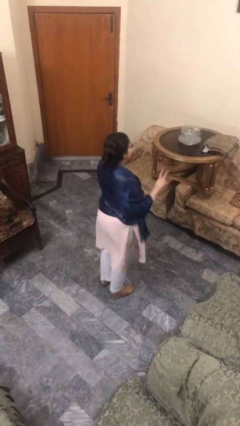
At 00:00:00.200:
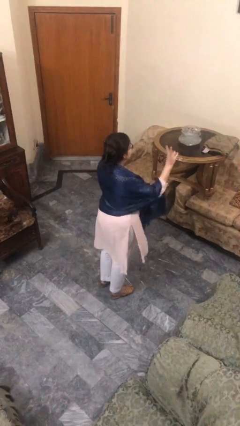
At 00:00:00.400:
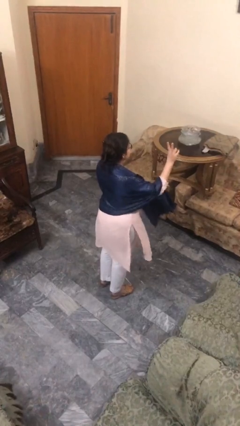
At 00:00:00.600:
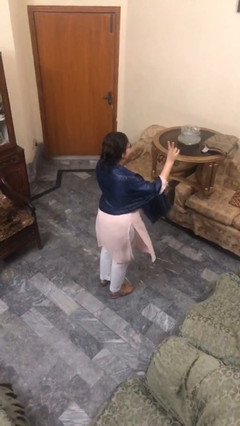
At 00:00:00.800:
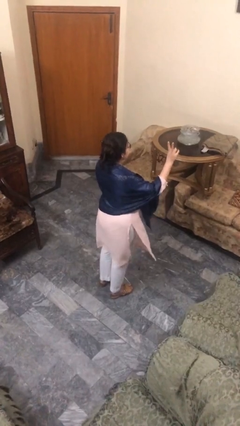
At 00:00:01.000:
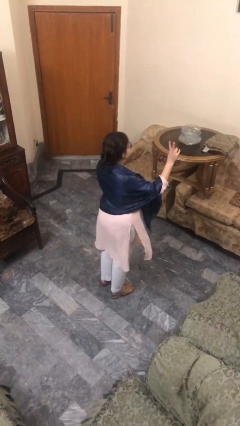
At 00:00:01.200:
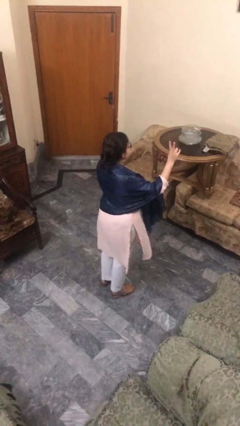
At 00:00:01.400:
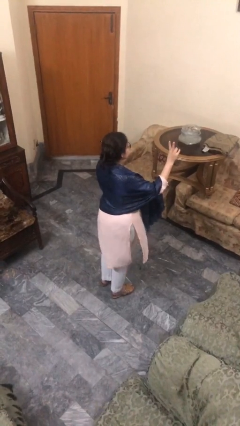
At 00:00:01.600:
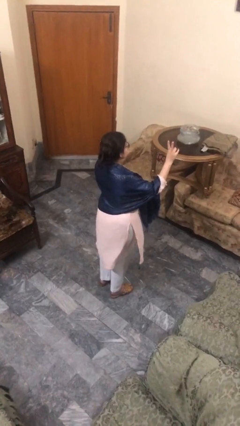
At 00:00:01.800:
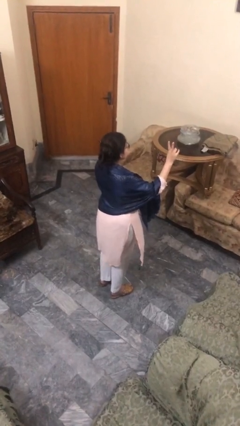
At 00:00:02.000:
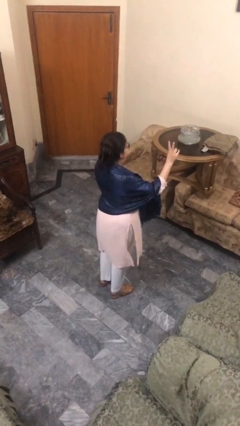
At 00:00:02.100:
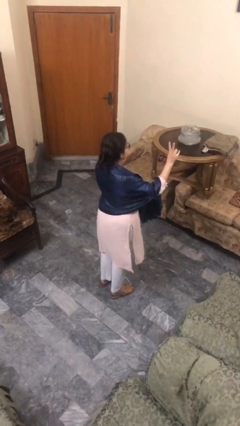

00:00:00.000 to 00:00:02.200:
person gestures peace

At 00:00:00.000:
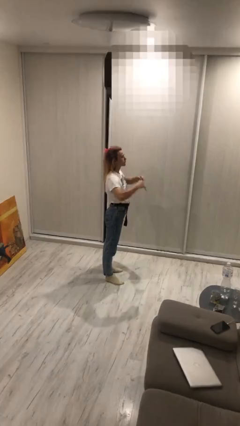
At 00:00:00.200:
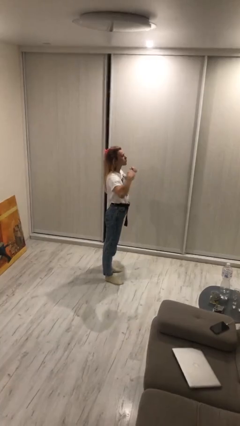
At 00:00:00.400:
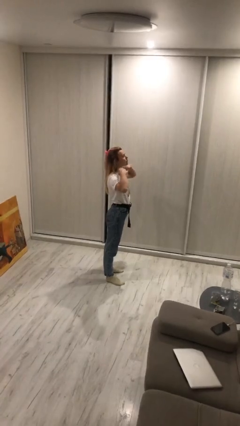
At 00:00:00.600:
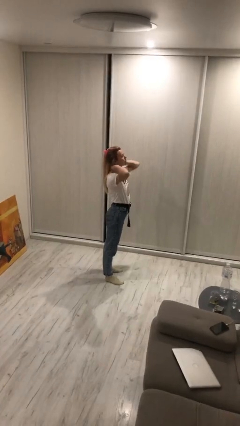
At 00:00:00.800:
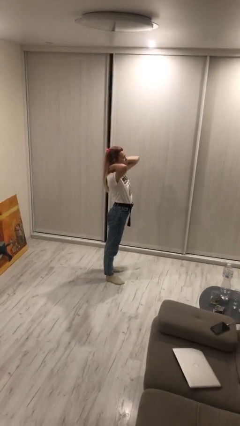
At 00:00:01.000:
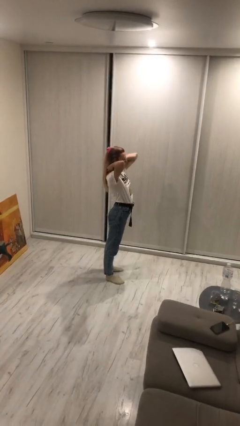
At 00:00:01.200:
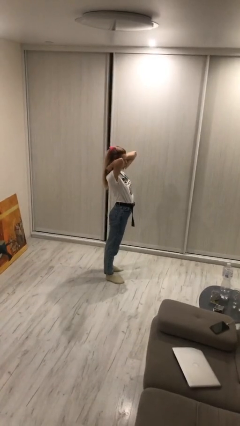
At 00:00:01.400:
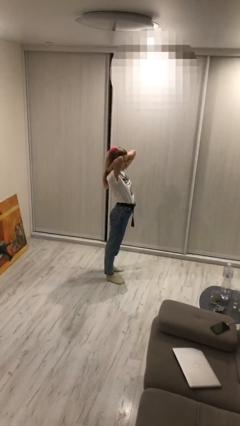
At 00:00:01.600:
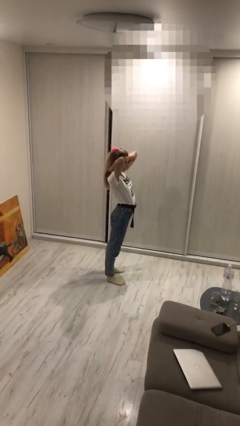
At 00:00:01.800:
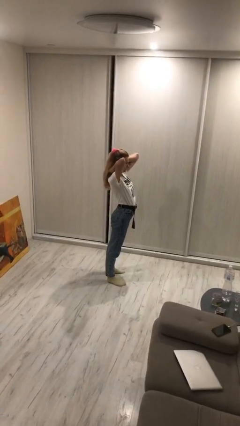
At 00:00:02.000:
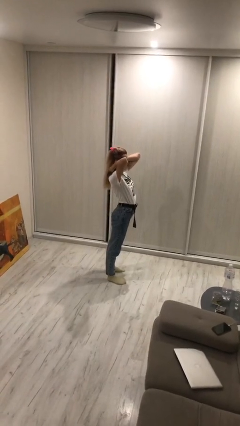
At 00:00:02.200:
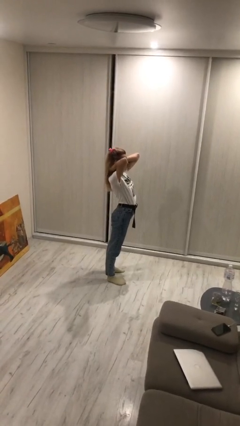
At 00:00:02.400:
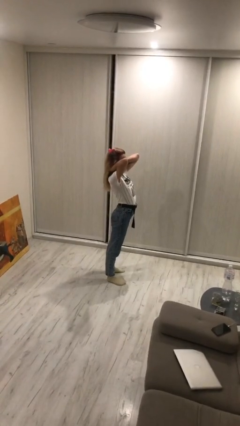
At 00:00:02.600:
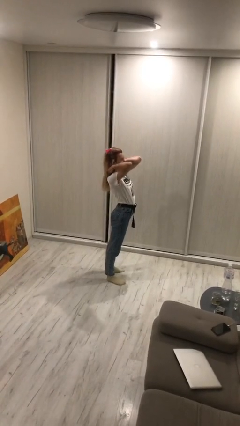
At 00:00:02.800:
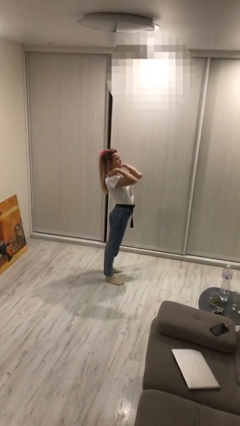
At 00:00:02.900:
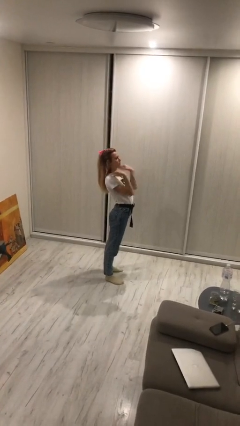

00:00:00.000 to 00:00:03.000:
person puts on necklace

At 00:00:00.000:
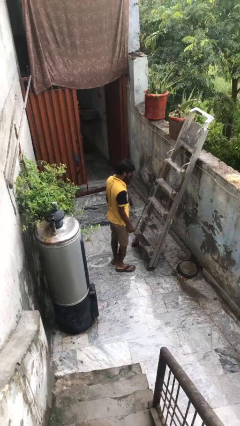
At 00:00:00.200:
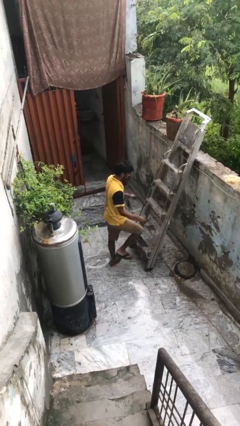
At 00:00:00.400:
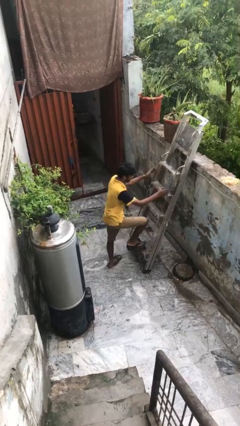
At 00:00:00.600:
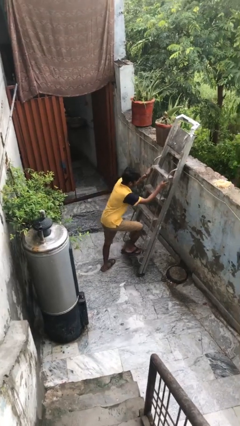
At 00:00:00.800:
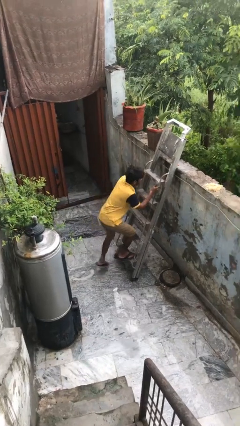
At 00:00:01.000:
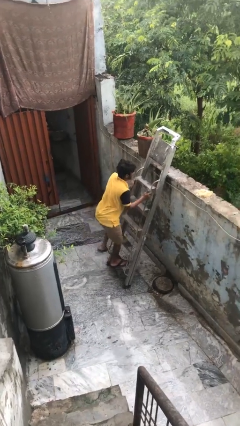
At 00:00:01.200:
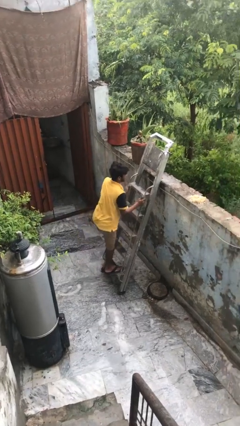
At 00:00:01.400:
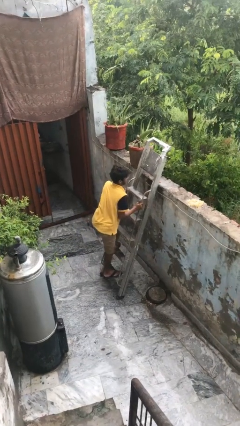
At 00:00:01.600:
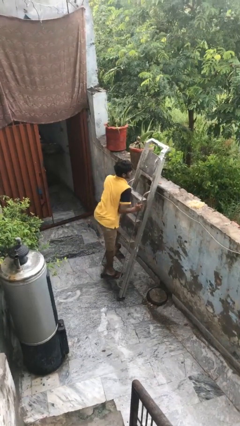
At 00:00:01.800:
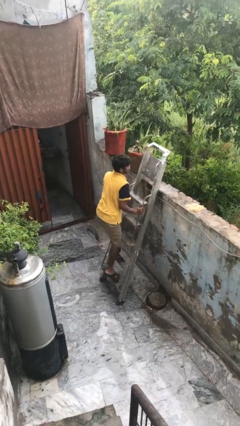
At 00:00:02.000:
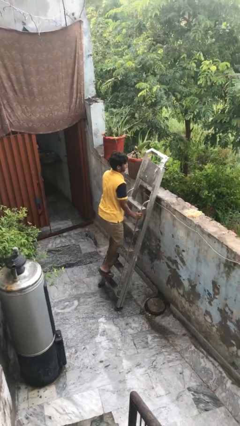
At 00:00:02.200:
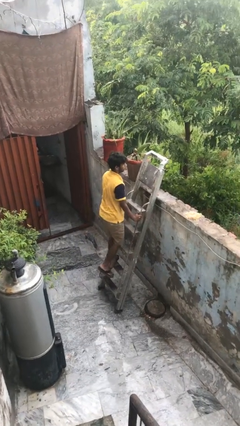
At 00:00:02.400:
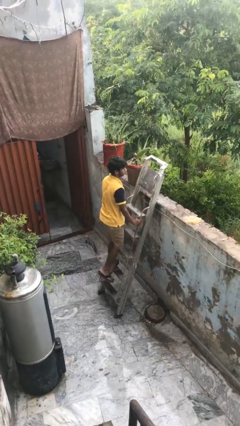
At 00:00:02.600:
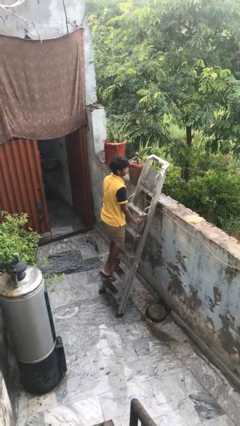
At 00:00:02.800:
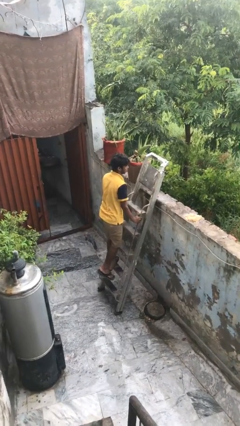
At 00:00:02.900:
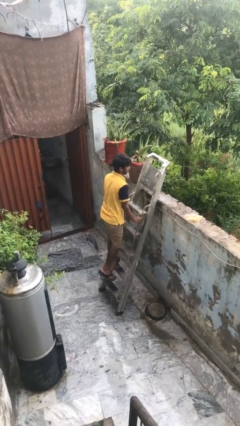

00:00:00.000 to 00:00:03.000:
person climbs up ladder

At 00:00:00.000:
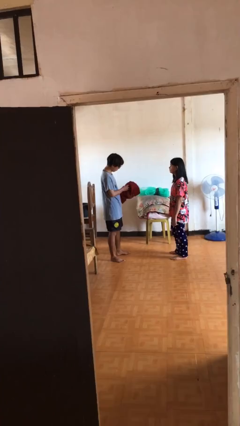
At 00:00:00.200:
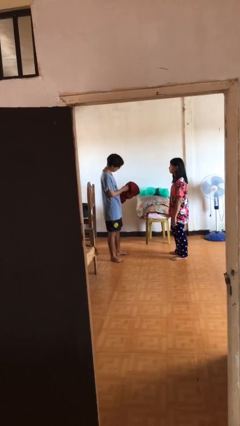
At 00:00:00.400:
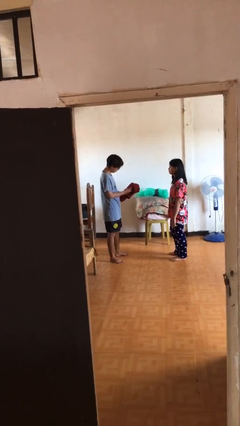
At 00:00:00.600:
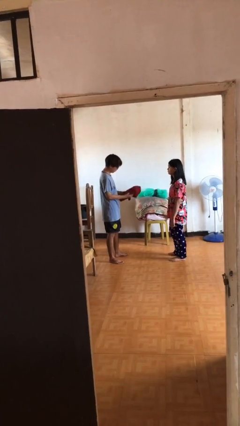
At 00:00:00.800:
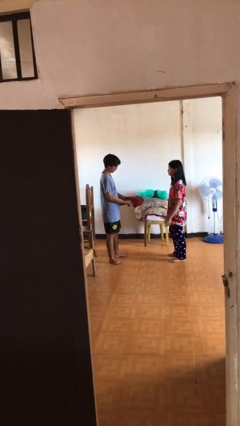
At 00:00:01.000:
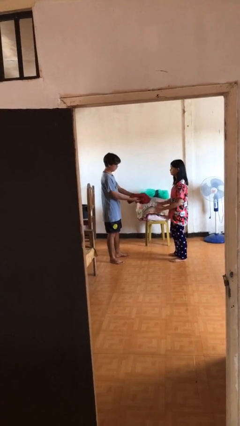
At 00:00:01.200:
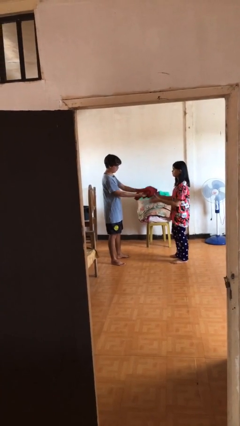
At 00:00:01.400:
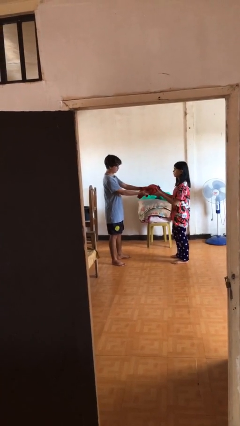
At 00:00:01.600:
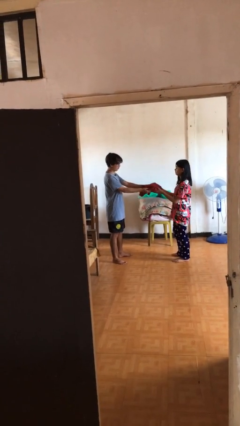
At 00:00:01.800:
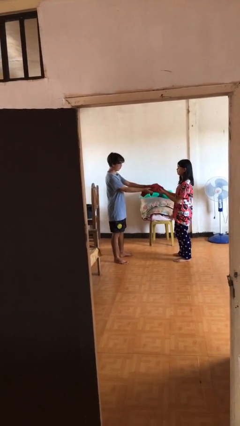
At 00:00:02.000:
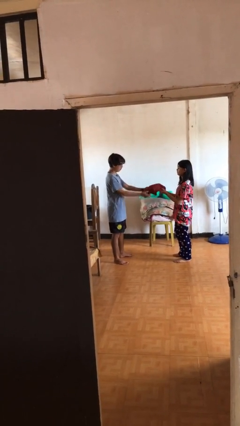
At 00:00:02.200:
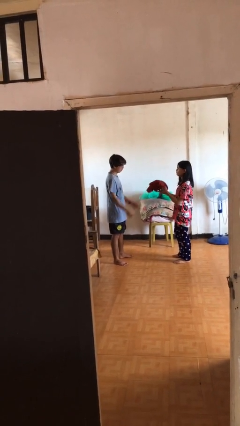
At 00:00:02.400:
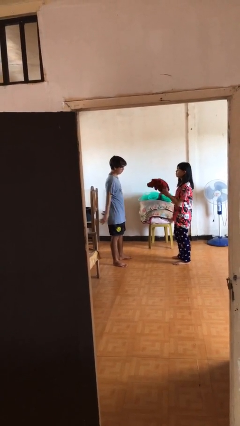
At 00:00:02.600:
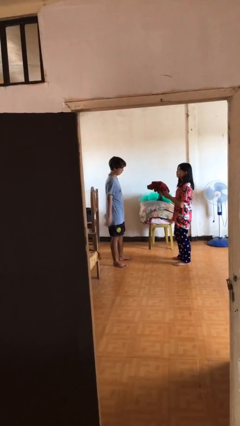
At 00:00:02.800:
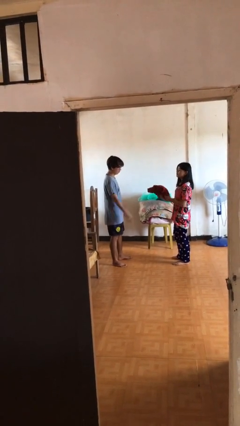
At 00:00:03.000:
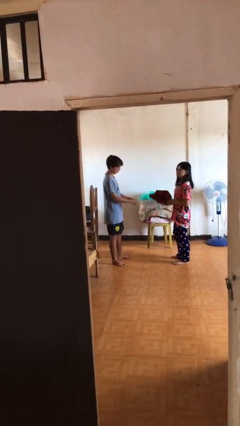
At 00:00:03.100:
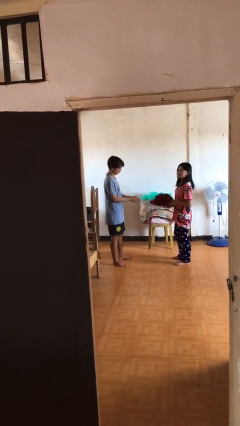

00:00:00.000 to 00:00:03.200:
person transfers object to person

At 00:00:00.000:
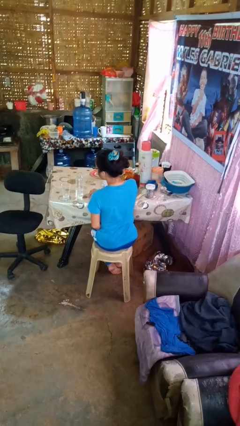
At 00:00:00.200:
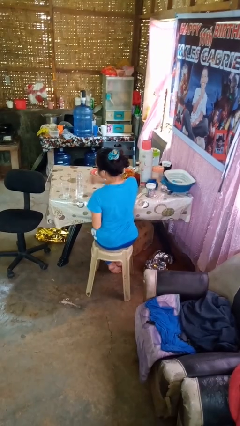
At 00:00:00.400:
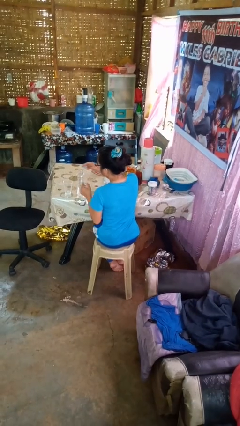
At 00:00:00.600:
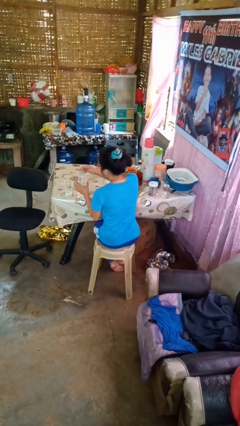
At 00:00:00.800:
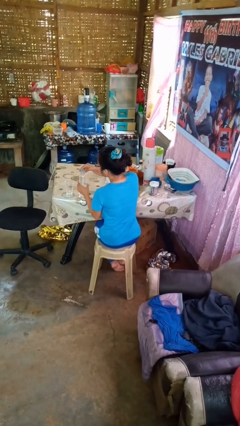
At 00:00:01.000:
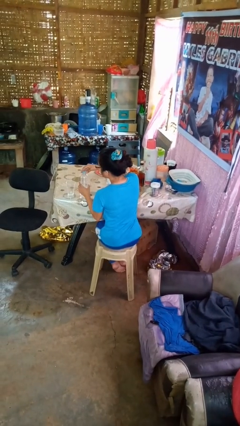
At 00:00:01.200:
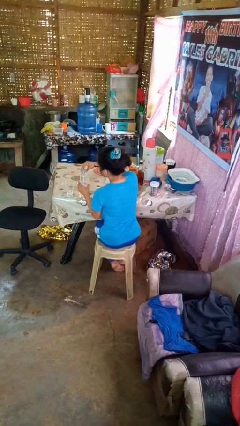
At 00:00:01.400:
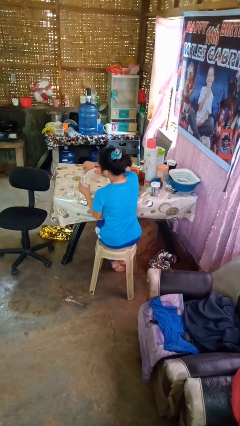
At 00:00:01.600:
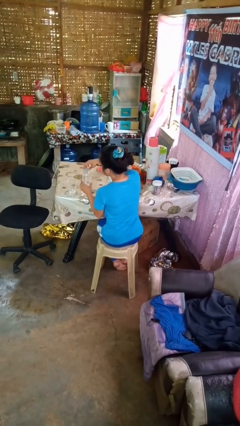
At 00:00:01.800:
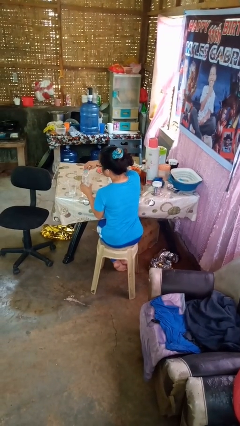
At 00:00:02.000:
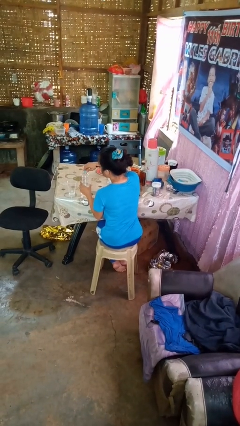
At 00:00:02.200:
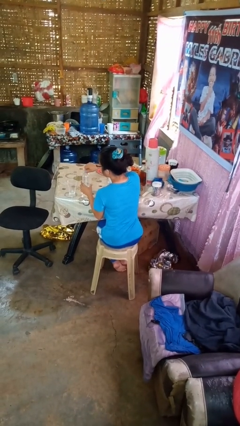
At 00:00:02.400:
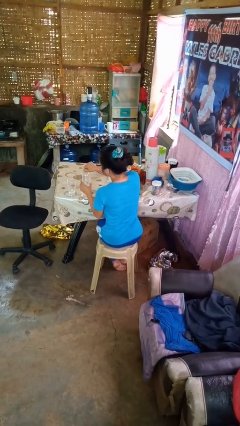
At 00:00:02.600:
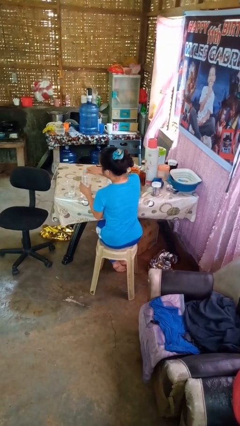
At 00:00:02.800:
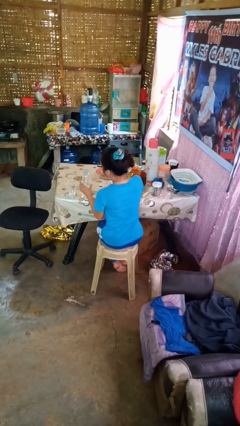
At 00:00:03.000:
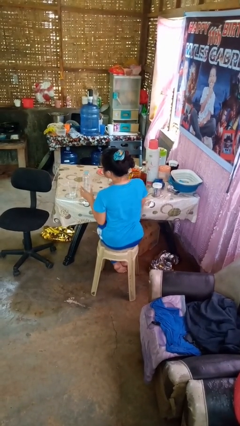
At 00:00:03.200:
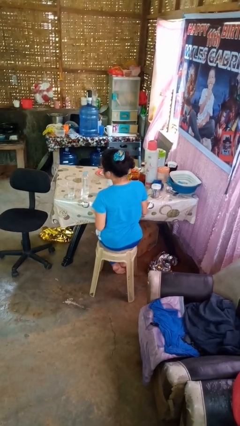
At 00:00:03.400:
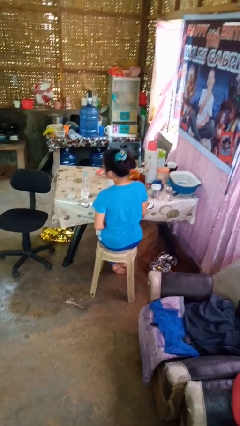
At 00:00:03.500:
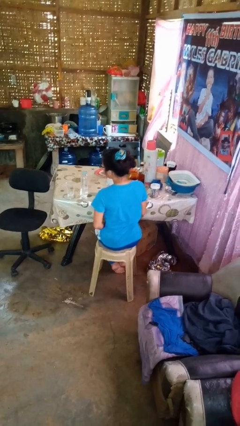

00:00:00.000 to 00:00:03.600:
person screws lid to bottle

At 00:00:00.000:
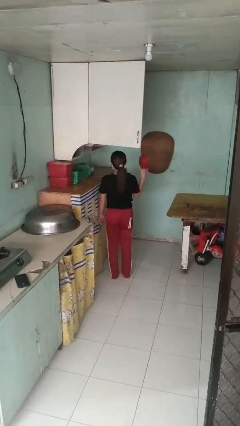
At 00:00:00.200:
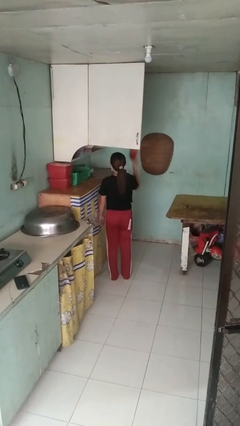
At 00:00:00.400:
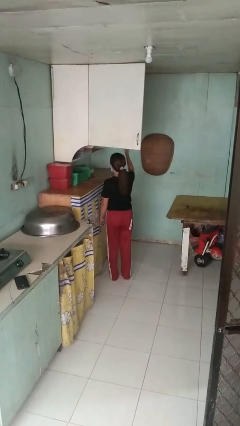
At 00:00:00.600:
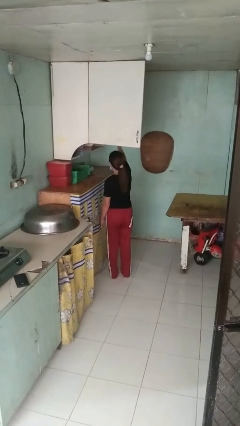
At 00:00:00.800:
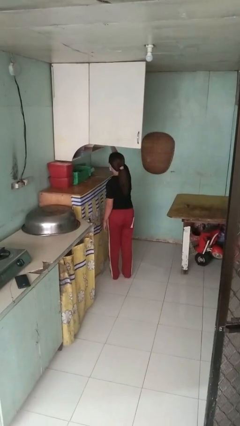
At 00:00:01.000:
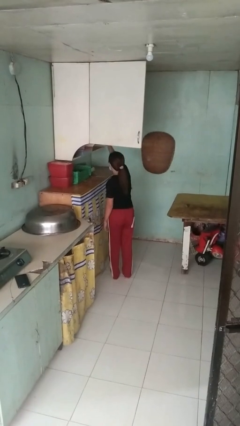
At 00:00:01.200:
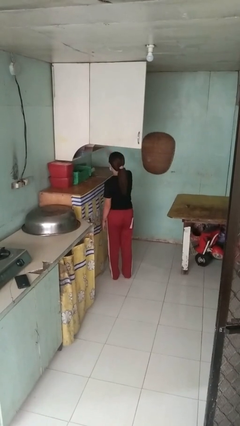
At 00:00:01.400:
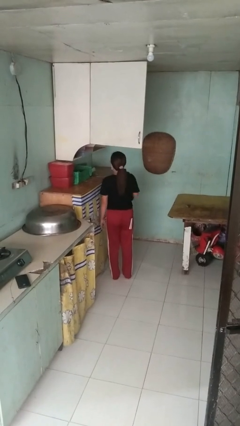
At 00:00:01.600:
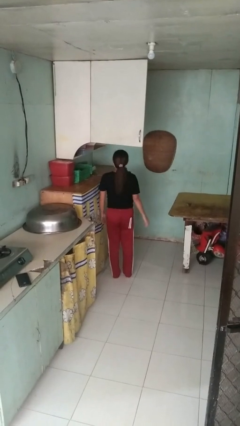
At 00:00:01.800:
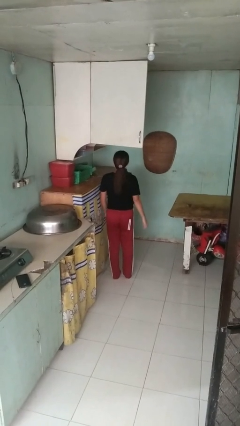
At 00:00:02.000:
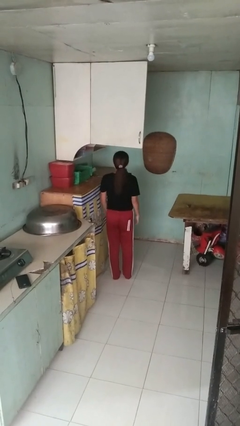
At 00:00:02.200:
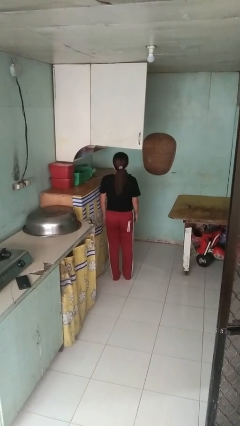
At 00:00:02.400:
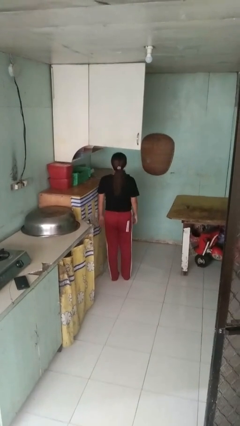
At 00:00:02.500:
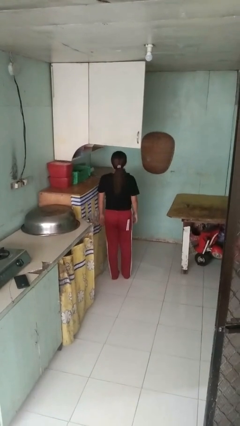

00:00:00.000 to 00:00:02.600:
person puts object in cabinet
